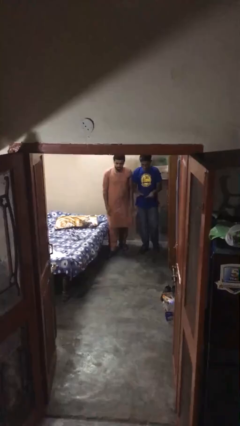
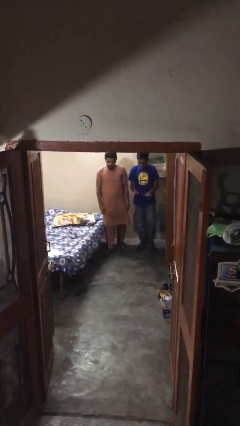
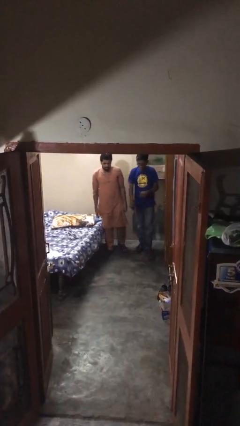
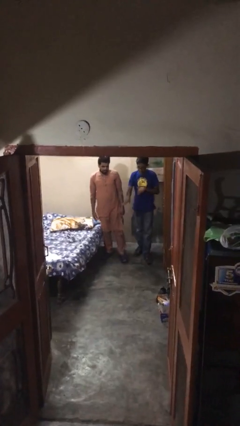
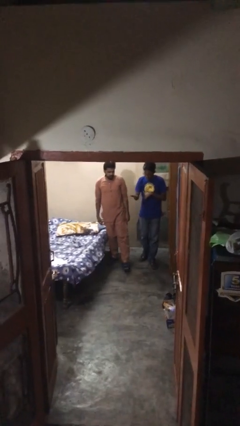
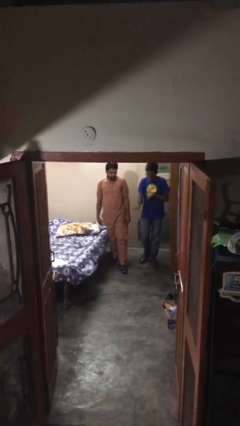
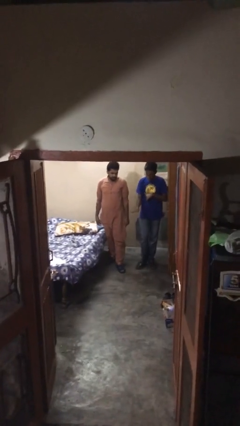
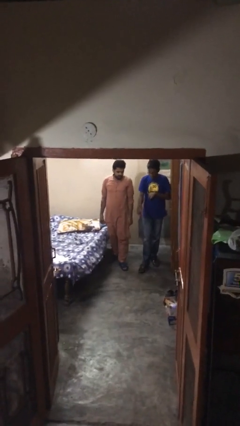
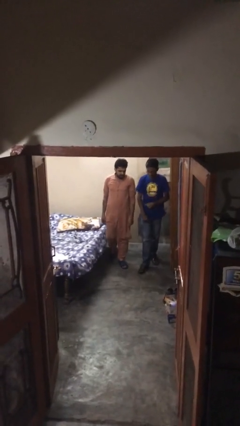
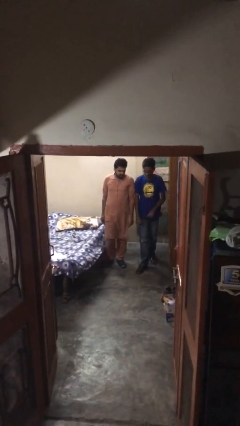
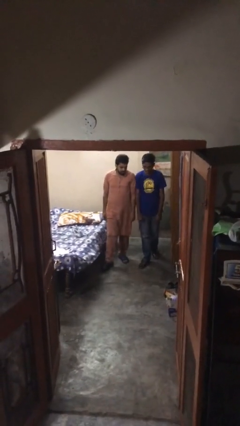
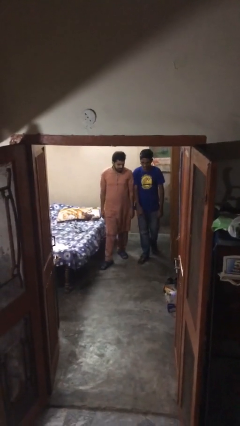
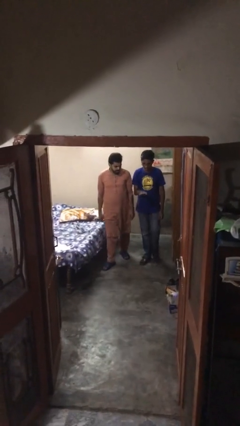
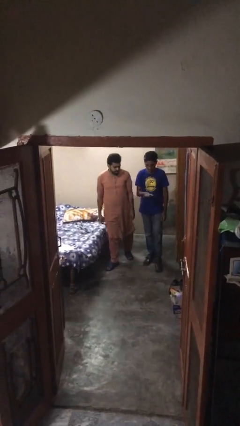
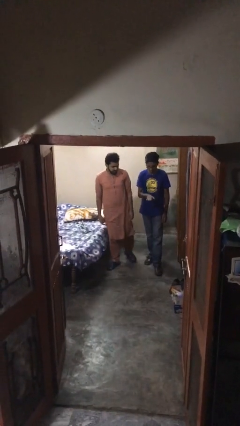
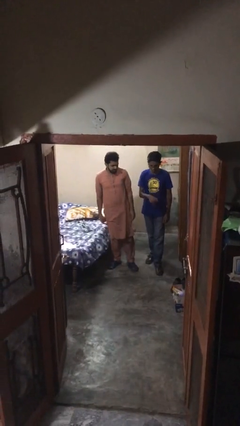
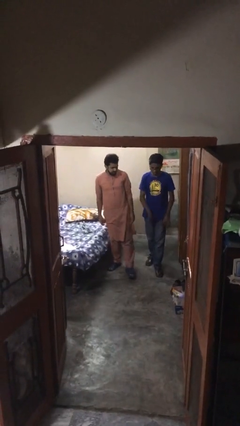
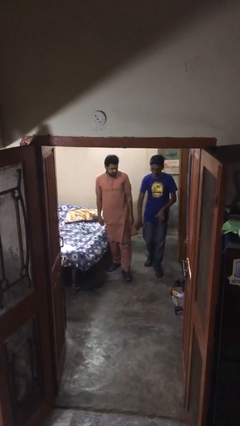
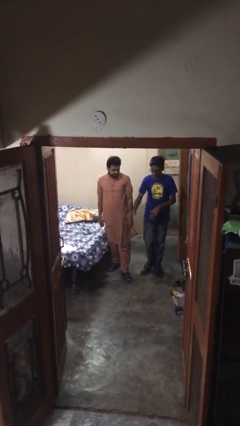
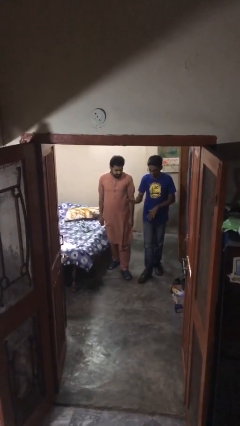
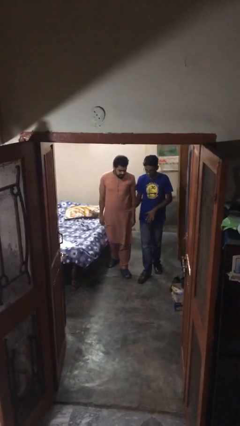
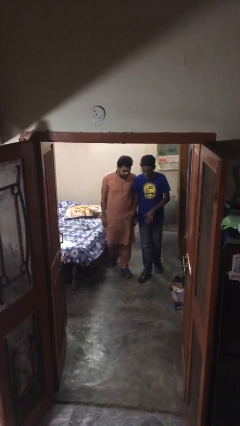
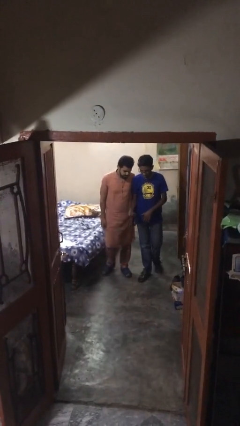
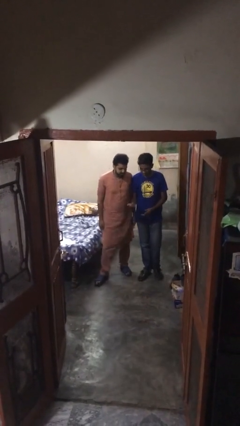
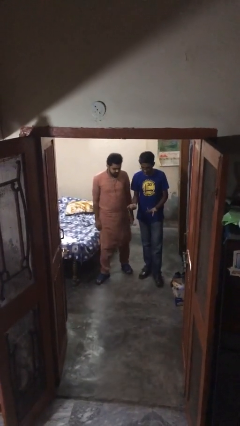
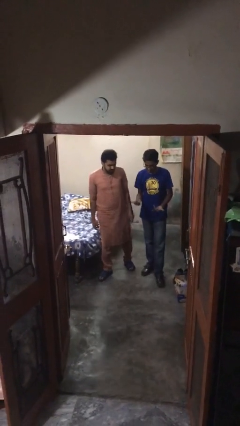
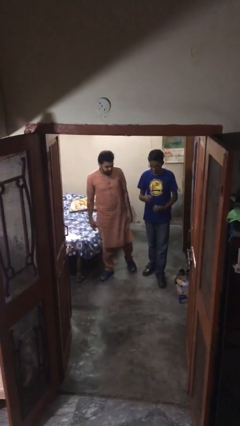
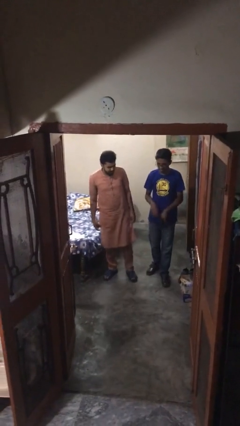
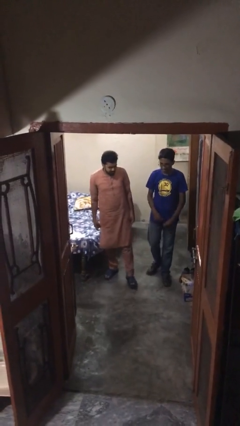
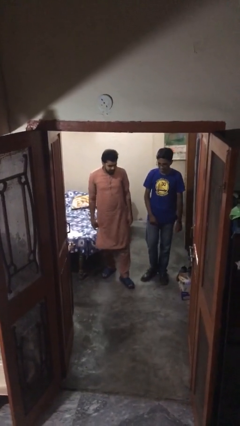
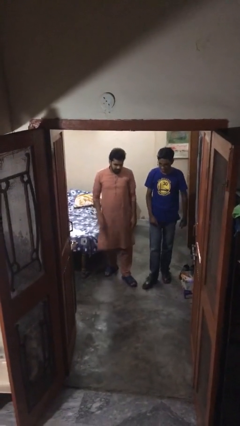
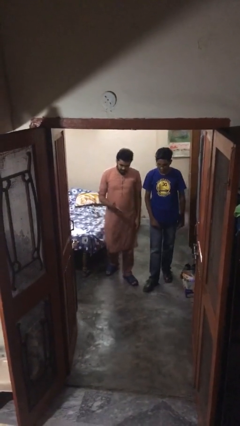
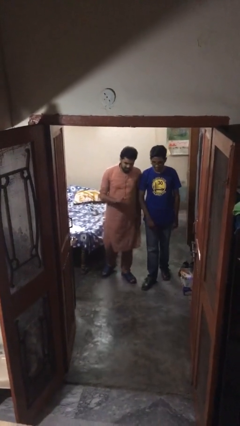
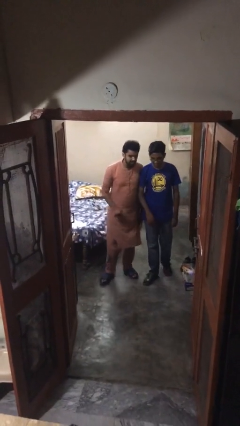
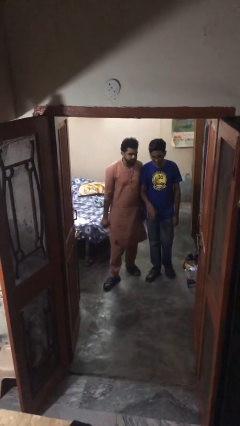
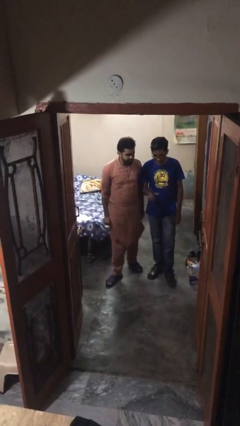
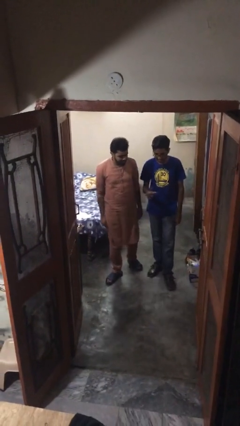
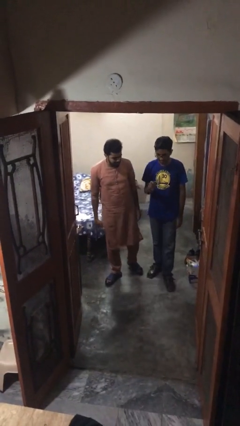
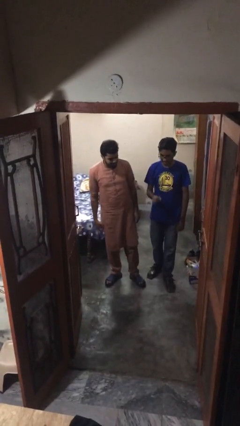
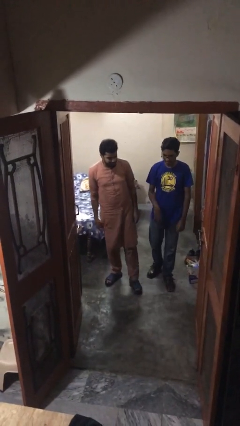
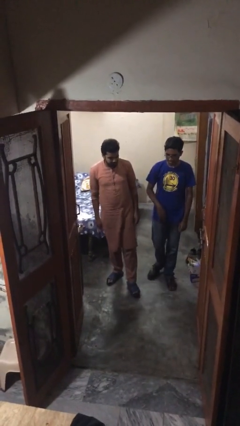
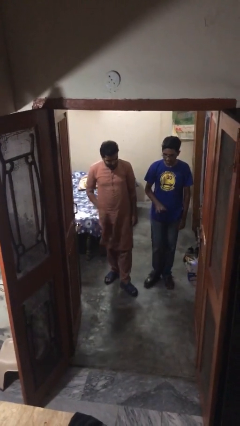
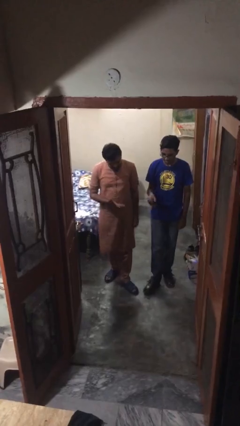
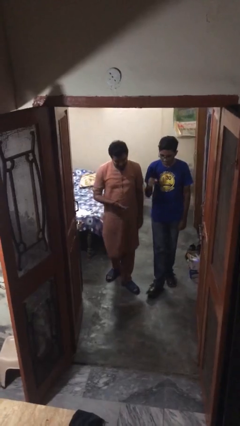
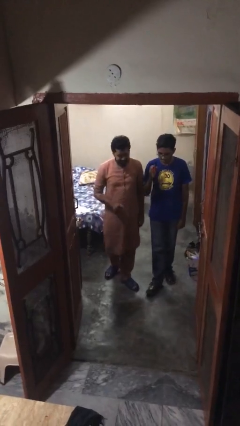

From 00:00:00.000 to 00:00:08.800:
person talks to person

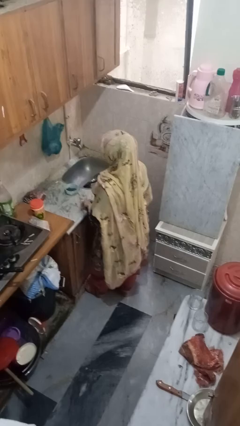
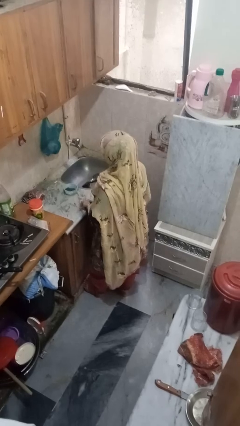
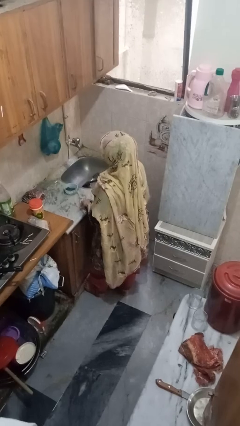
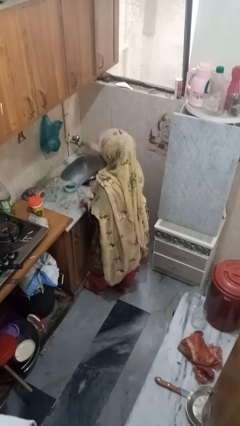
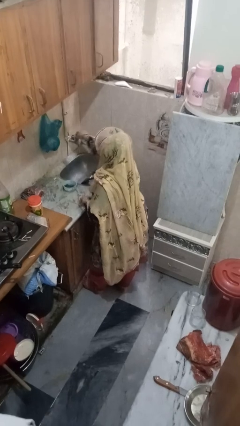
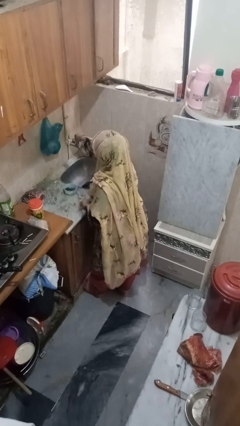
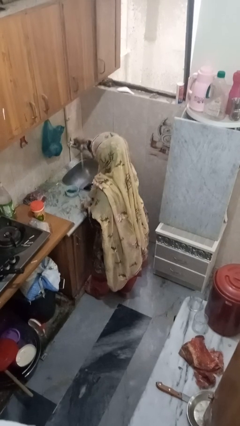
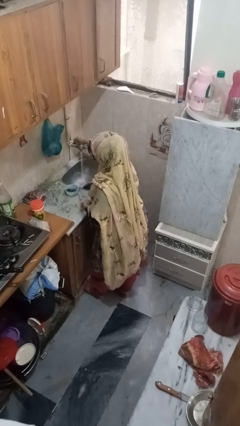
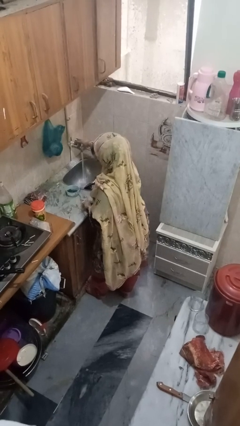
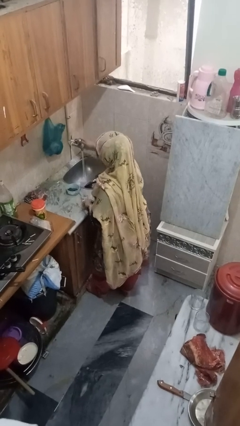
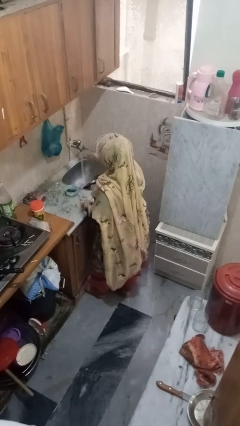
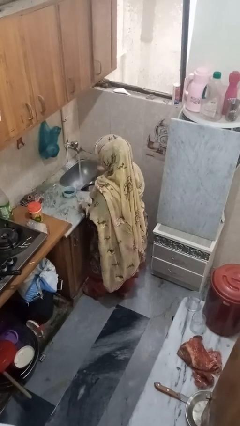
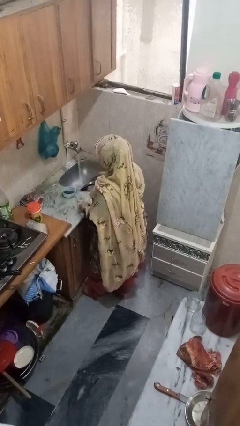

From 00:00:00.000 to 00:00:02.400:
person turns on faucet

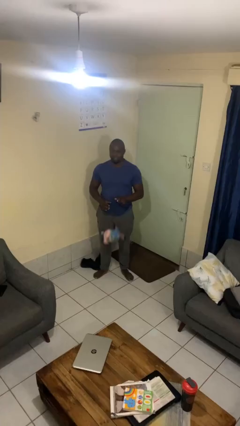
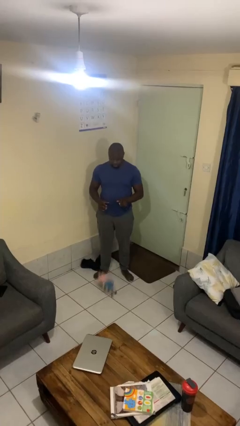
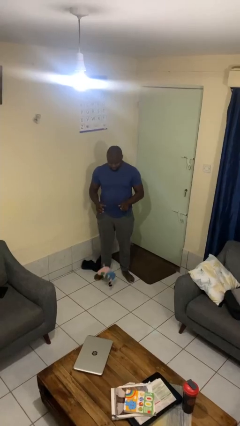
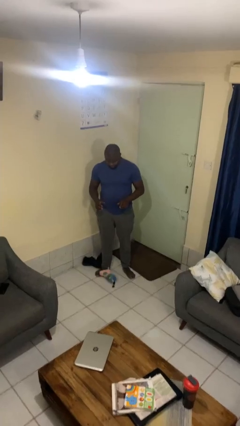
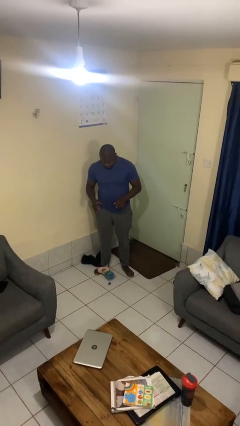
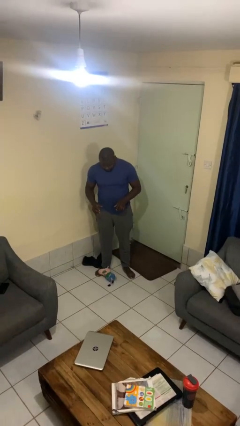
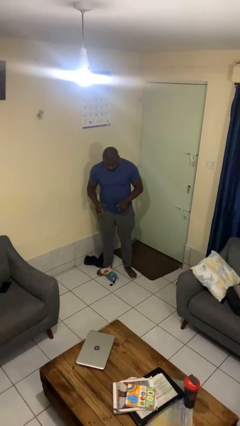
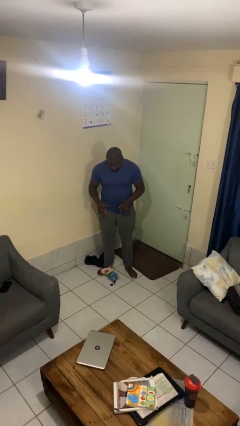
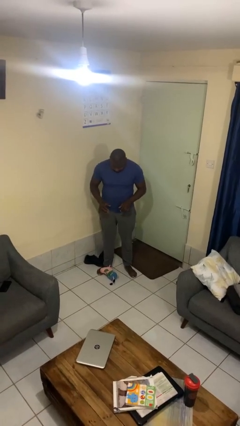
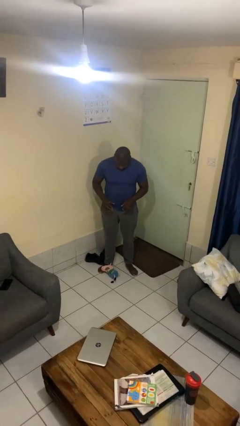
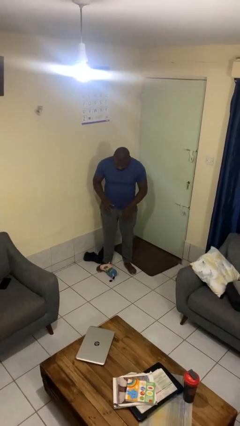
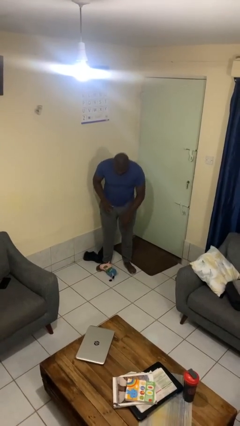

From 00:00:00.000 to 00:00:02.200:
person drops object

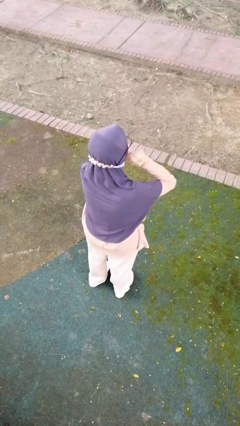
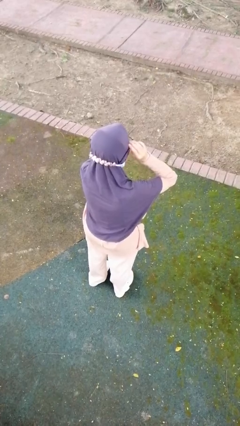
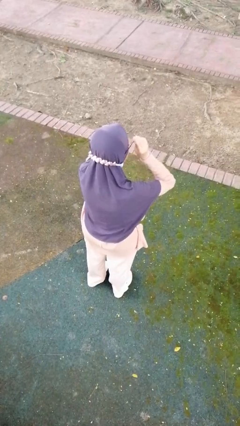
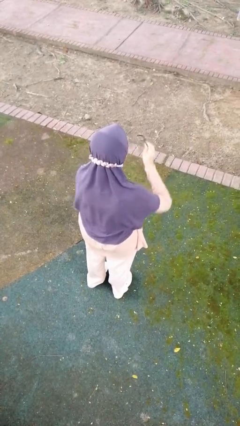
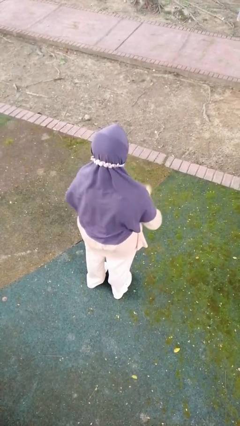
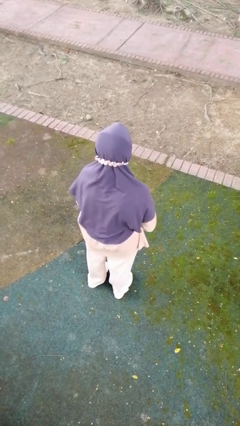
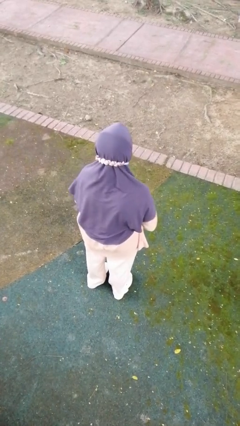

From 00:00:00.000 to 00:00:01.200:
person takes off glasses

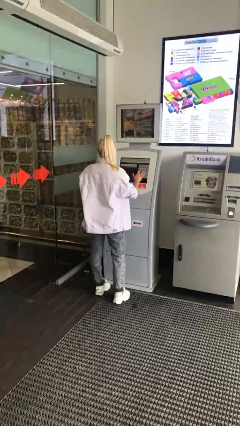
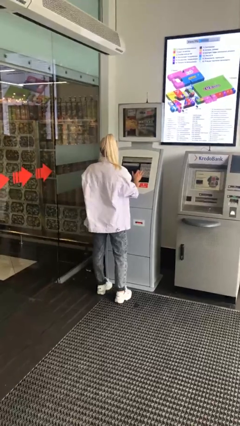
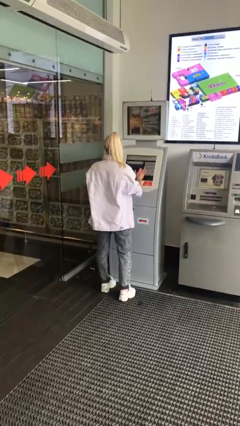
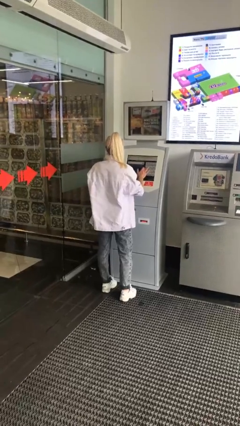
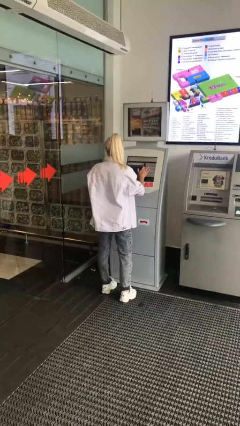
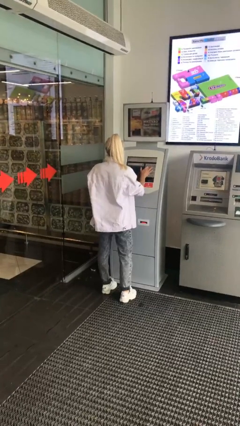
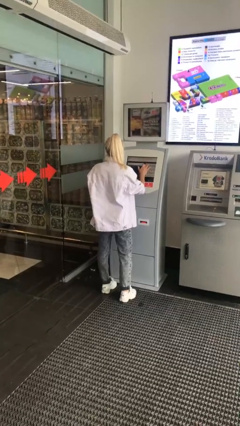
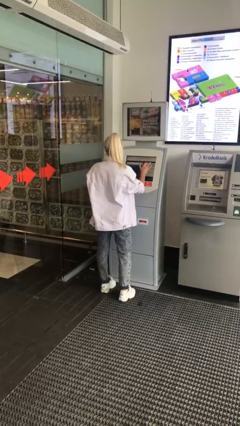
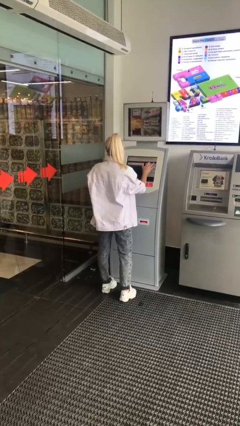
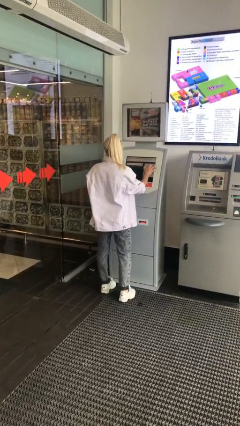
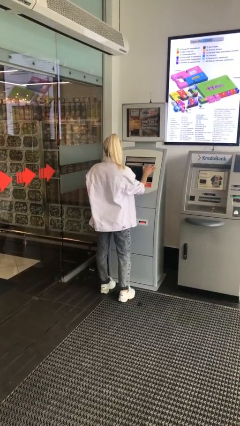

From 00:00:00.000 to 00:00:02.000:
person purchases from machine

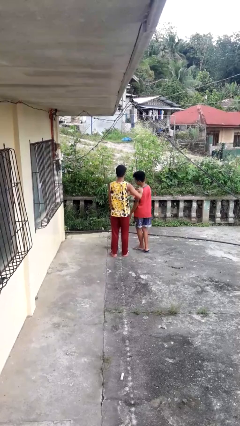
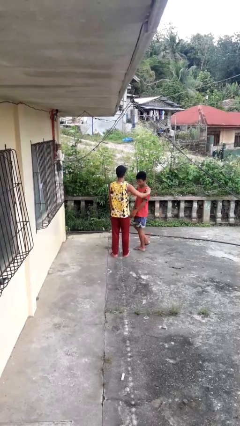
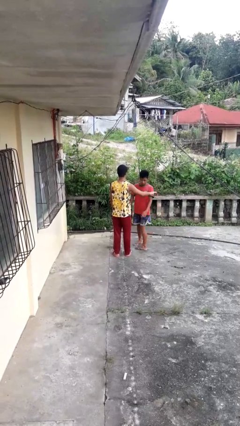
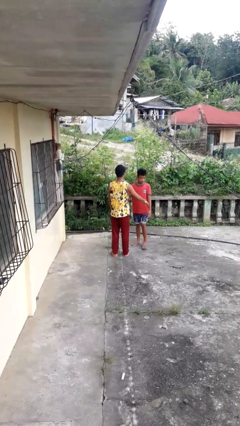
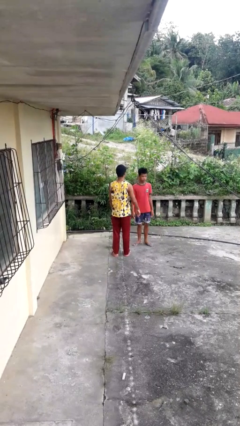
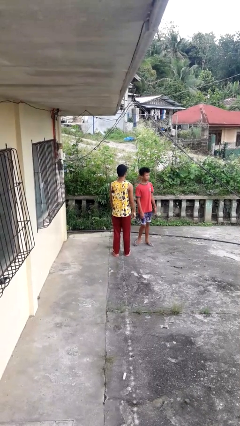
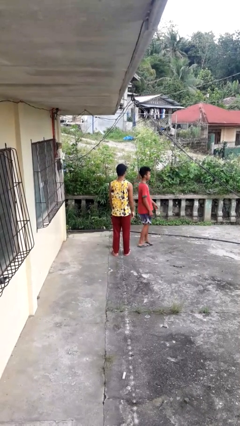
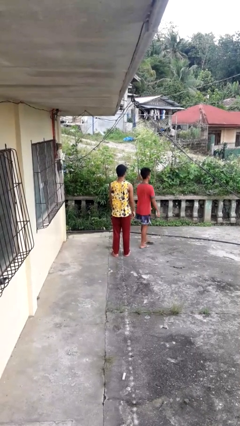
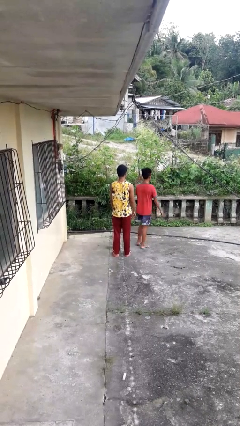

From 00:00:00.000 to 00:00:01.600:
person spins person around
